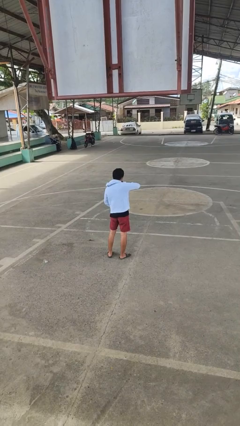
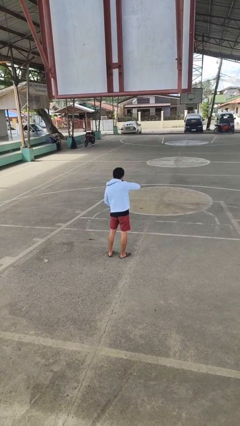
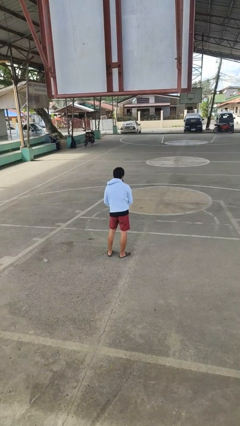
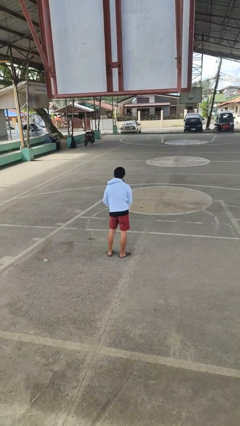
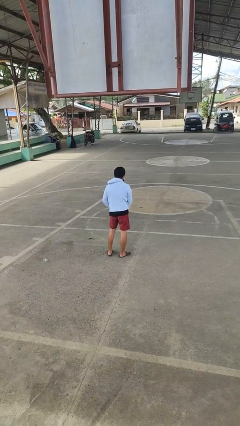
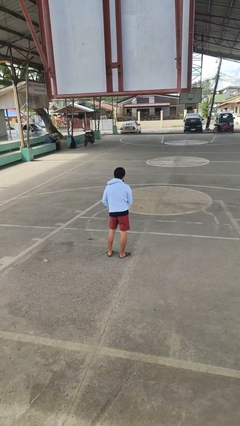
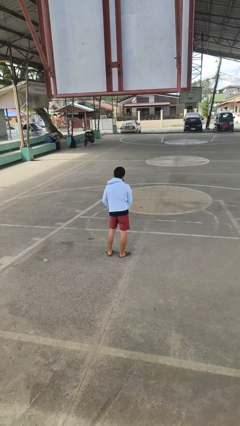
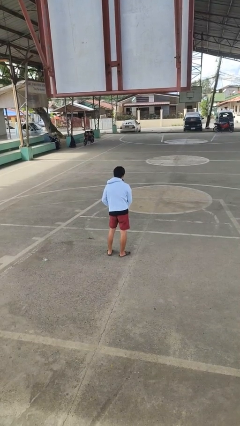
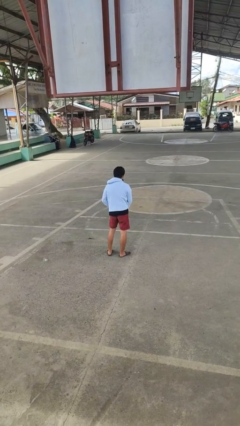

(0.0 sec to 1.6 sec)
person unzips jacket

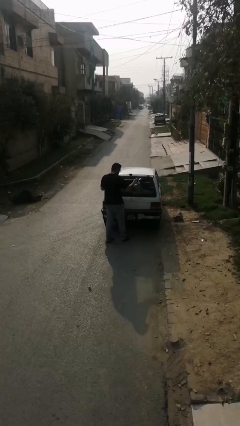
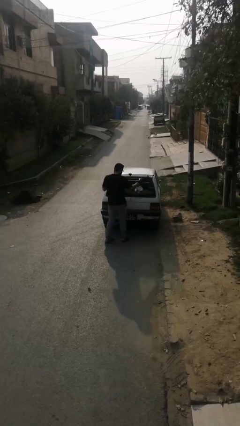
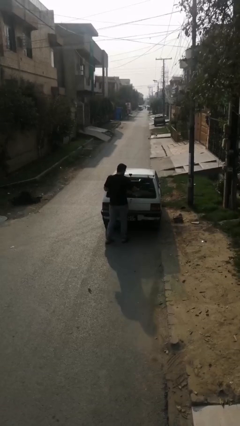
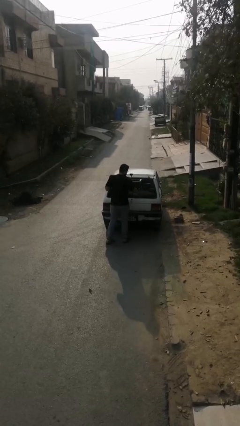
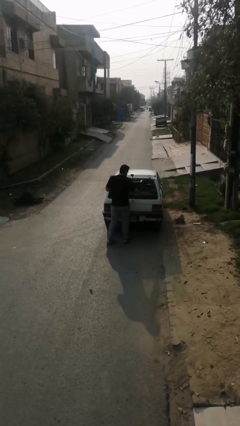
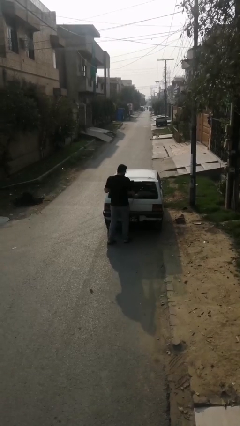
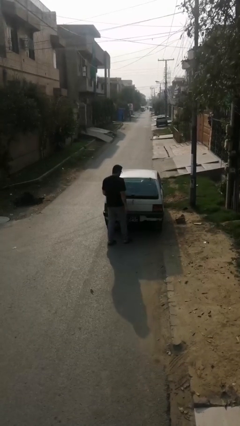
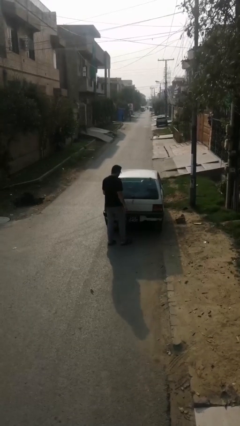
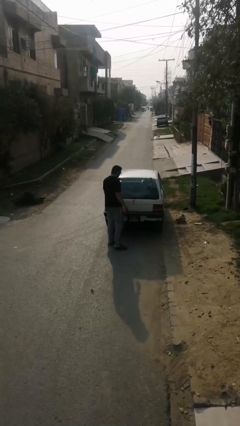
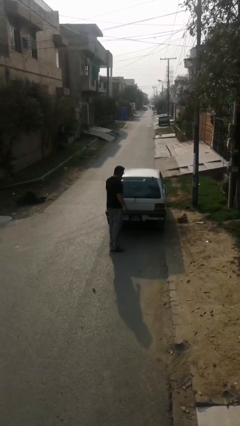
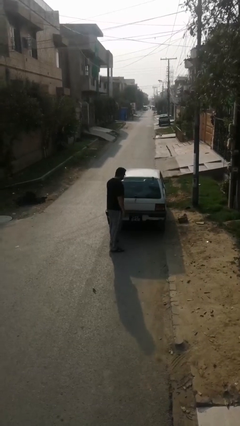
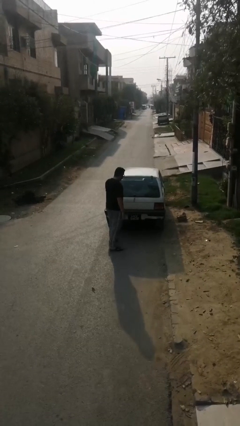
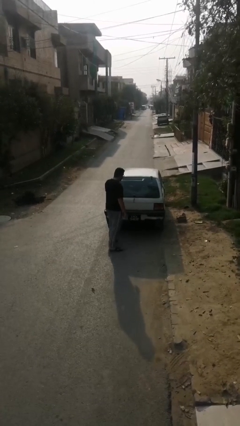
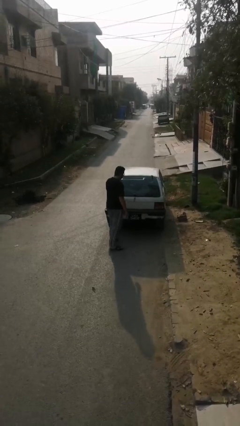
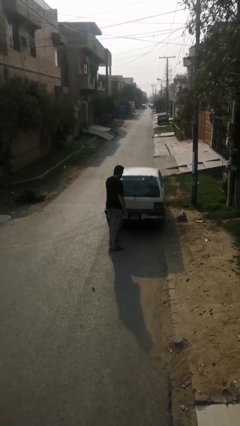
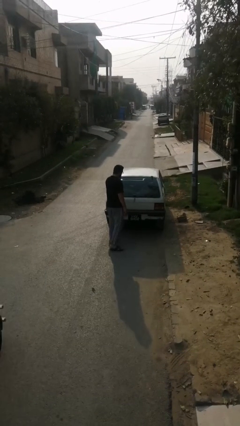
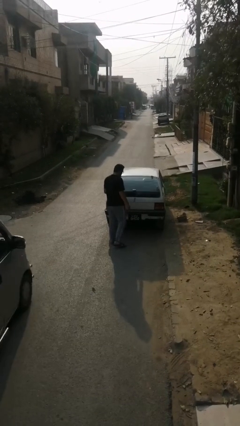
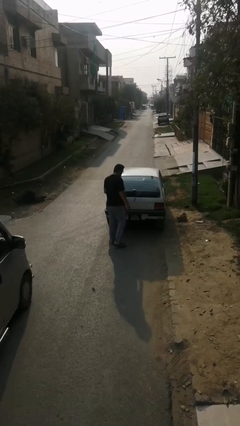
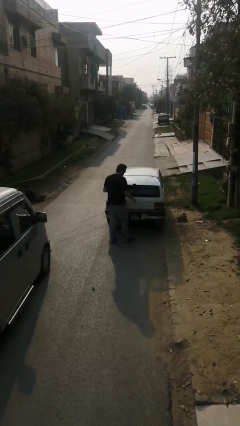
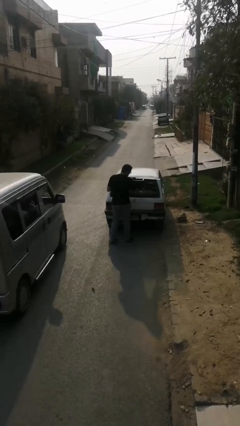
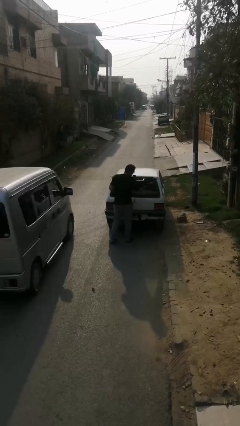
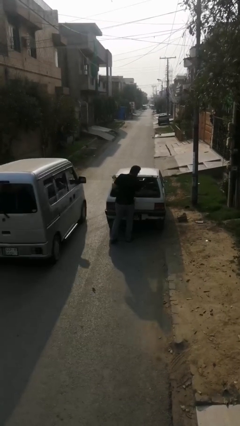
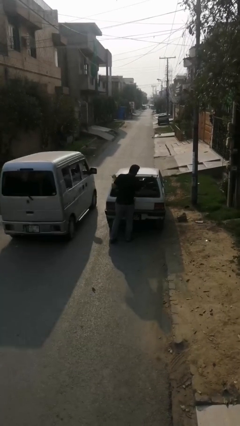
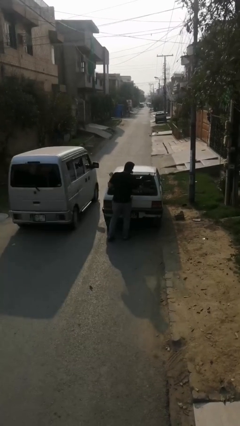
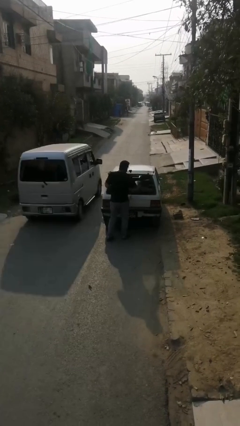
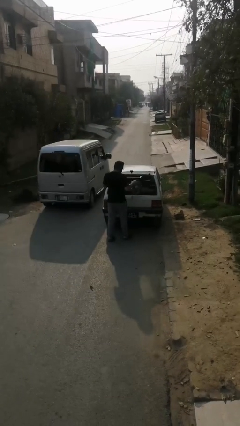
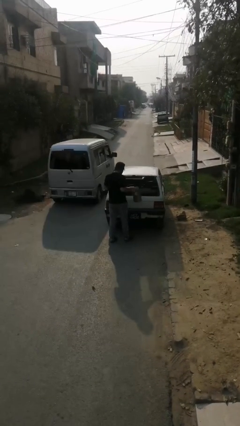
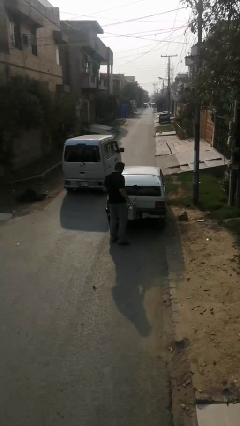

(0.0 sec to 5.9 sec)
person loads car

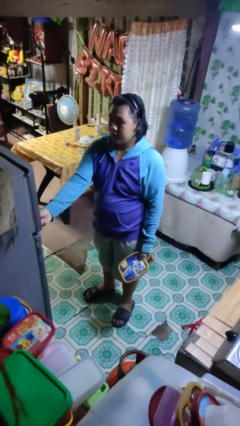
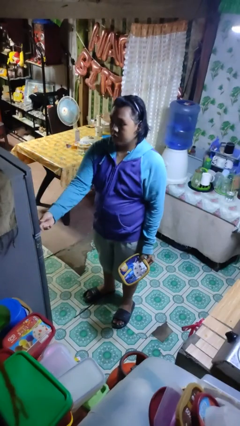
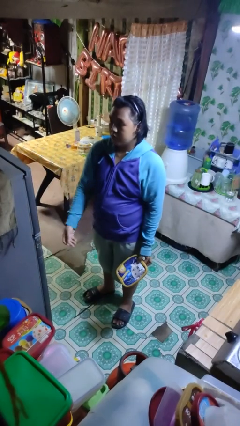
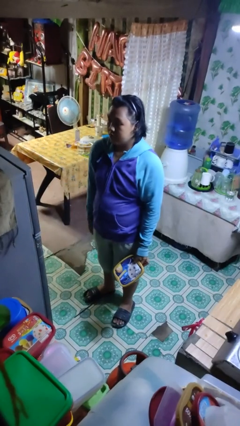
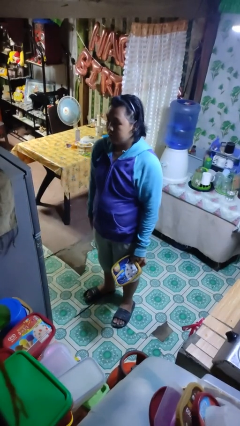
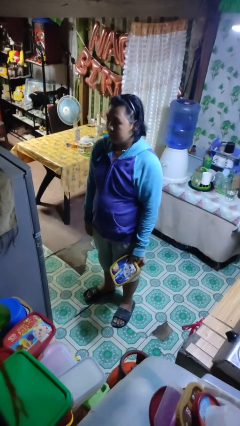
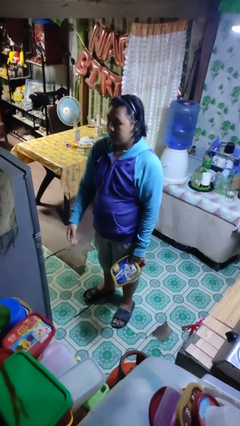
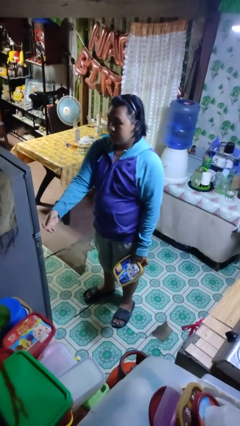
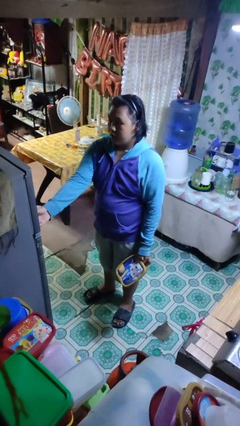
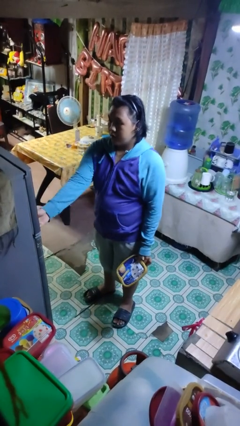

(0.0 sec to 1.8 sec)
person closes refrigerator

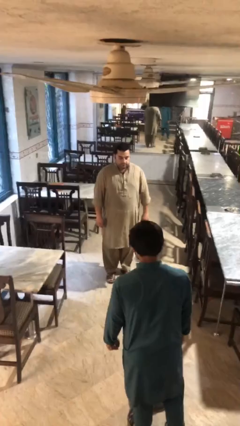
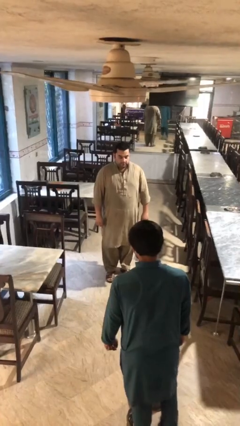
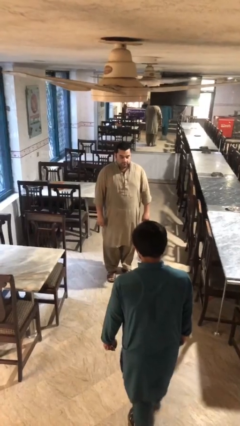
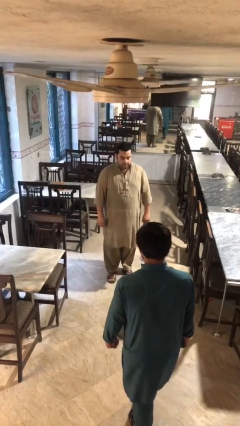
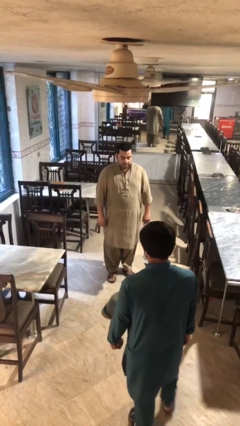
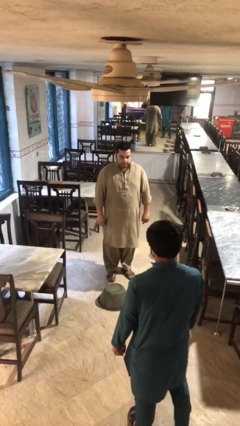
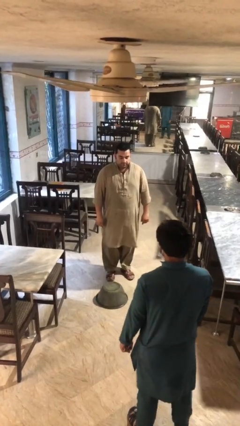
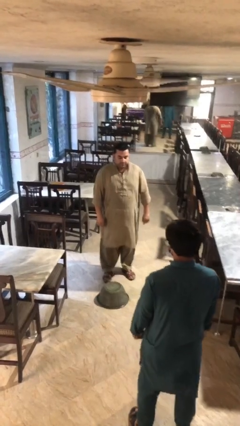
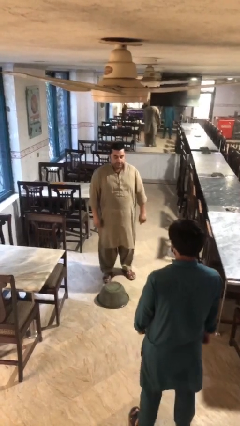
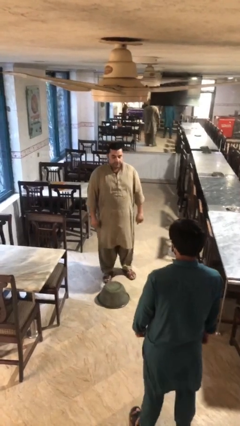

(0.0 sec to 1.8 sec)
person kicks object to person

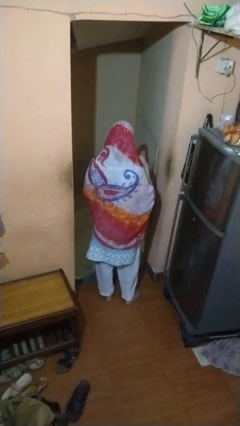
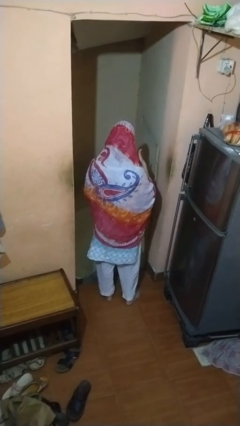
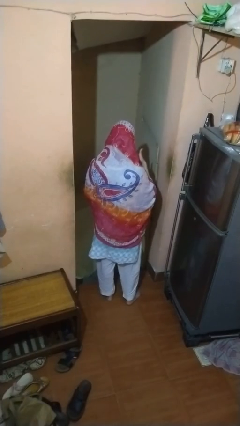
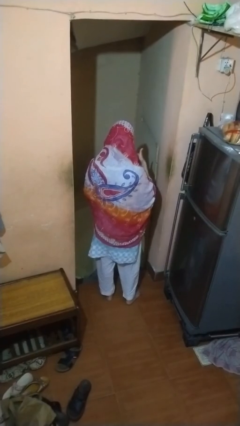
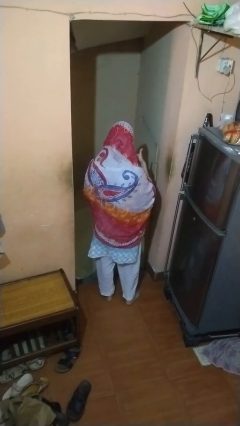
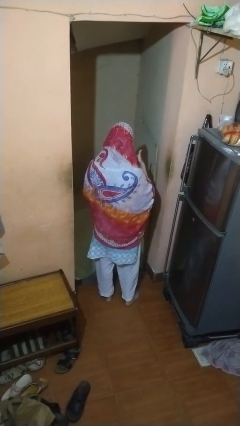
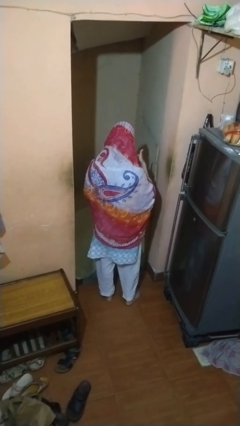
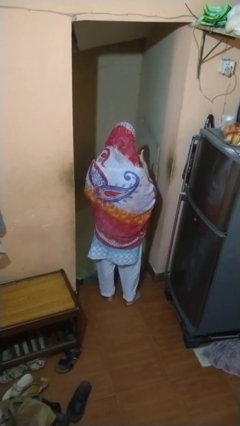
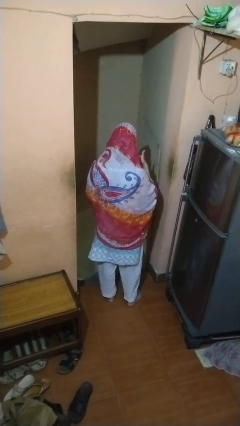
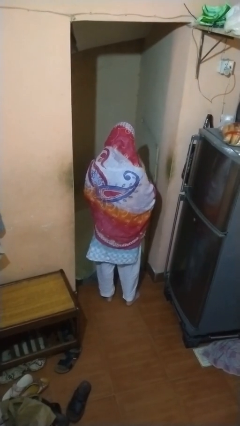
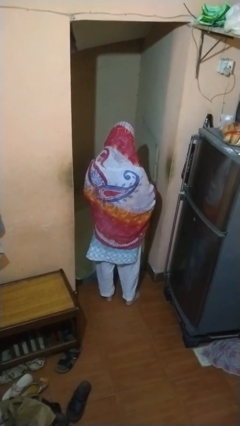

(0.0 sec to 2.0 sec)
person gestures call me

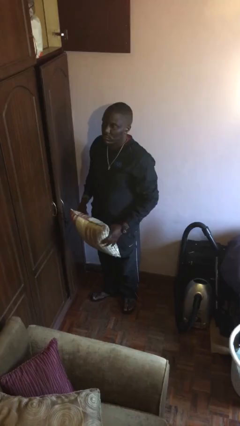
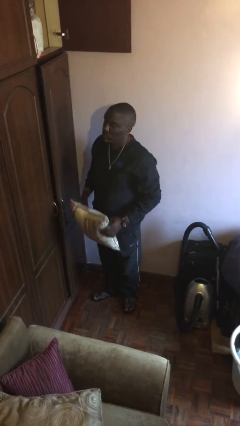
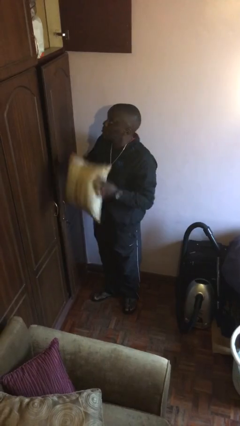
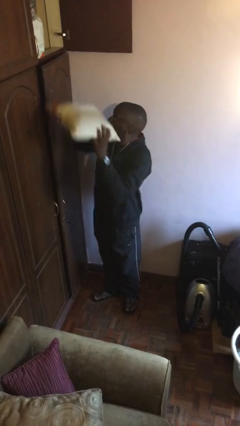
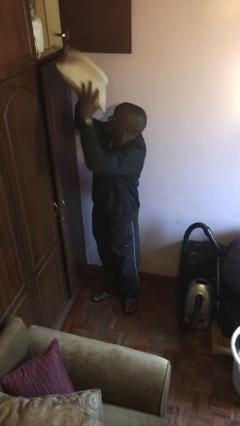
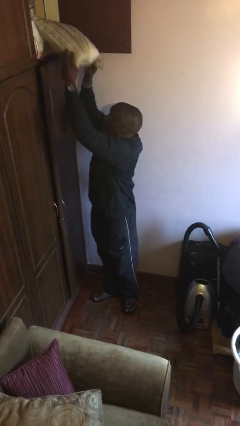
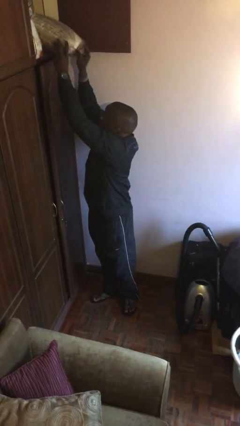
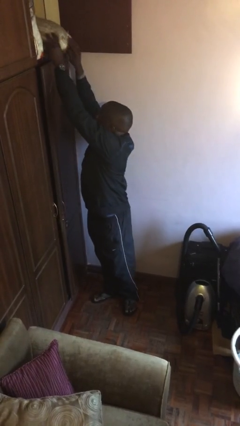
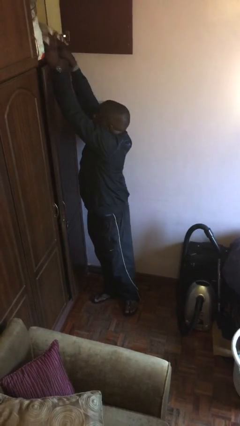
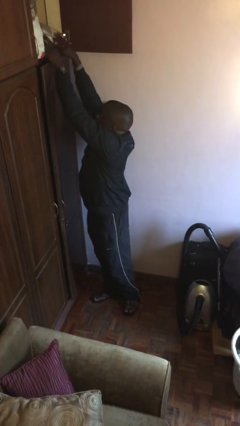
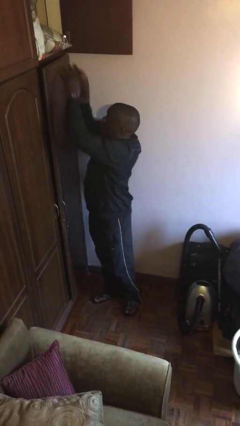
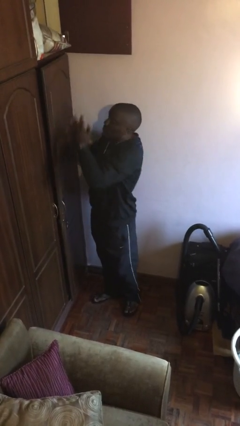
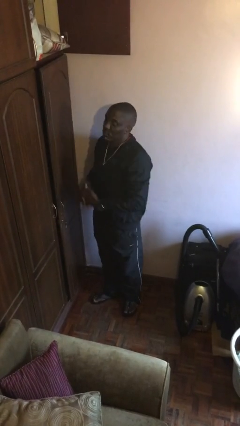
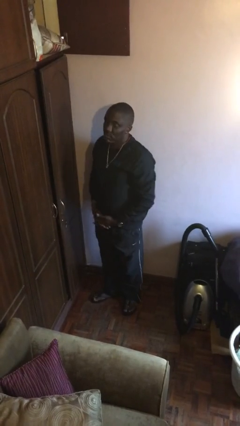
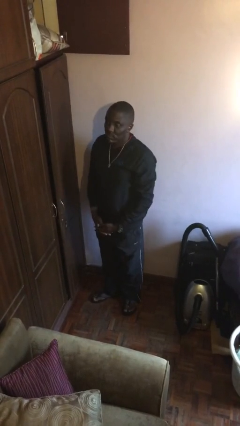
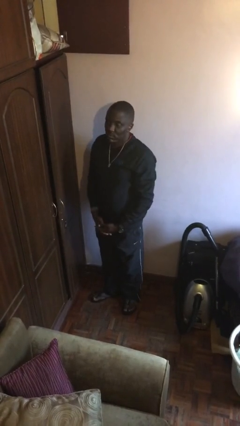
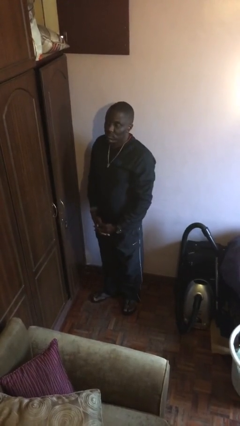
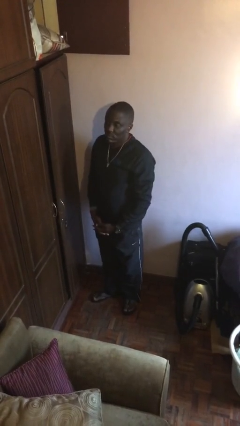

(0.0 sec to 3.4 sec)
person puts down object on shelf

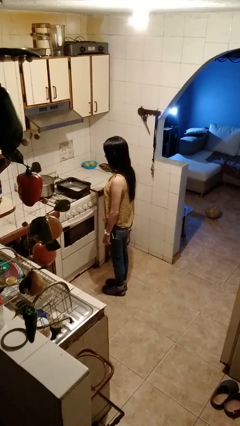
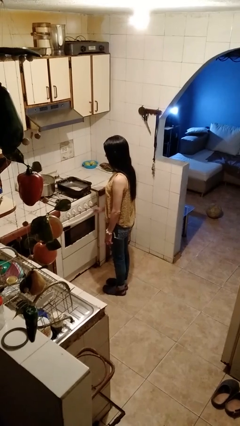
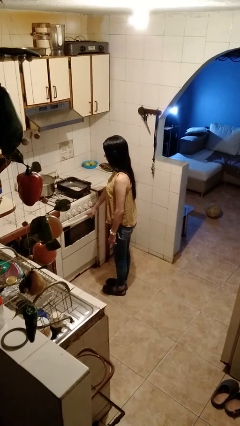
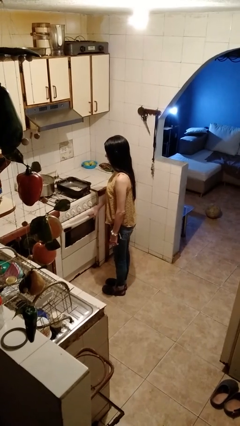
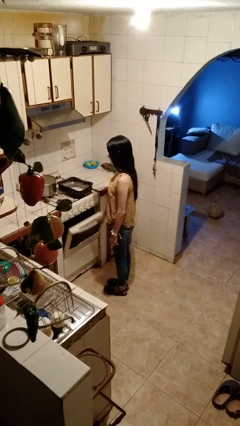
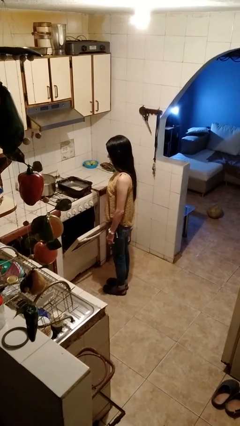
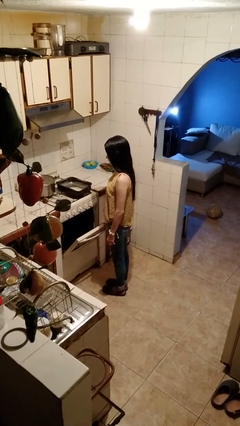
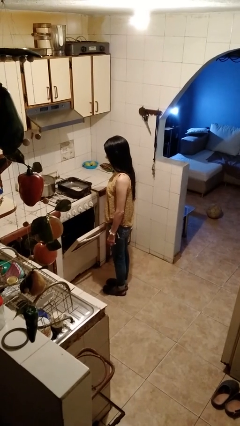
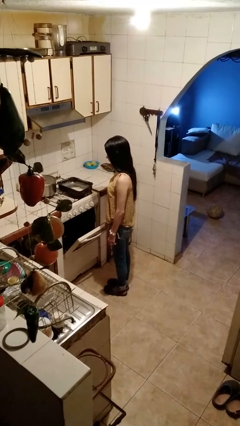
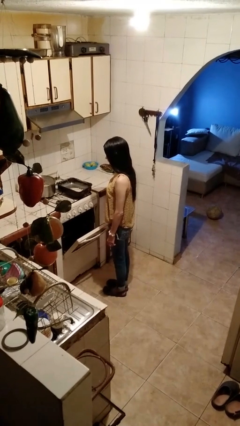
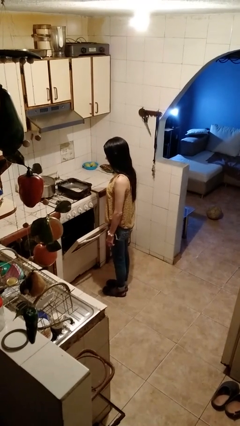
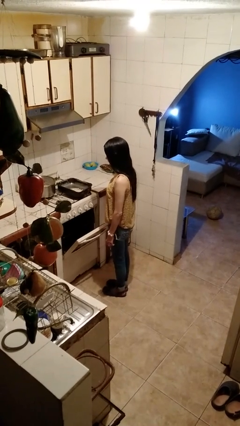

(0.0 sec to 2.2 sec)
person opens oven door
